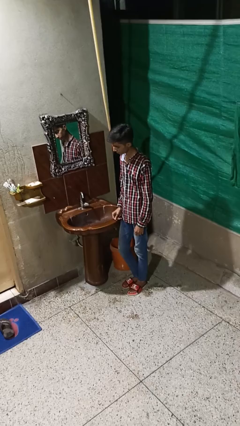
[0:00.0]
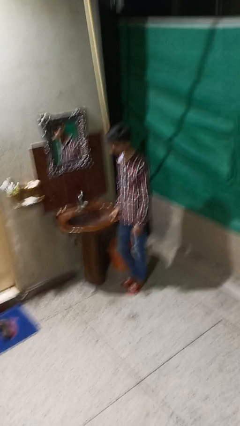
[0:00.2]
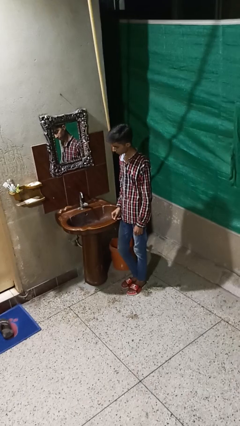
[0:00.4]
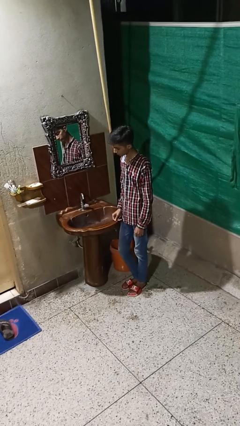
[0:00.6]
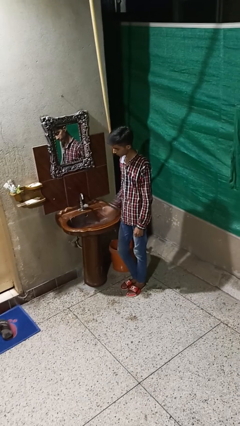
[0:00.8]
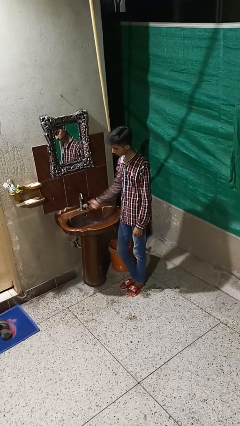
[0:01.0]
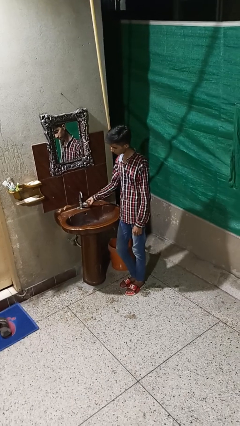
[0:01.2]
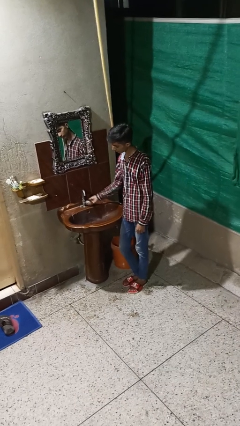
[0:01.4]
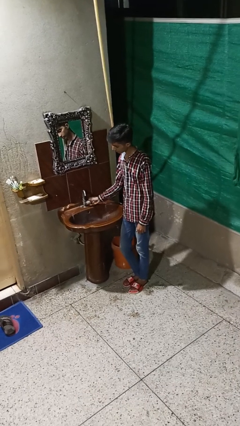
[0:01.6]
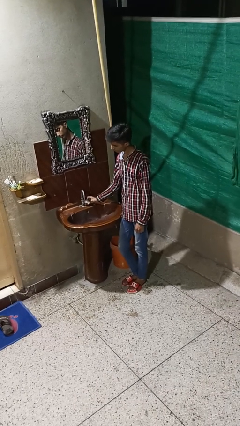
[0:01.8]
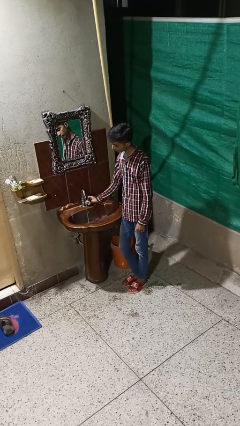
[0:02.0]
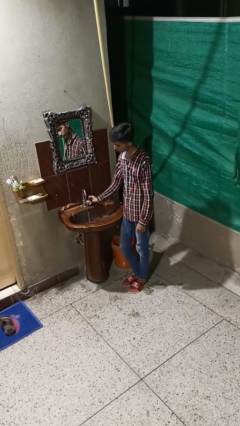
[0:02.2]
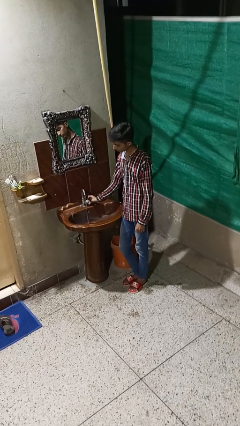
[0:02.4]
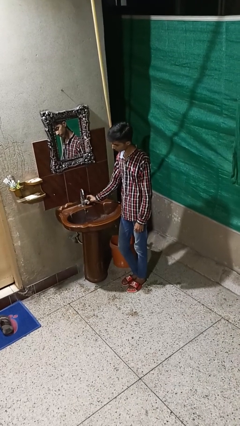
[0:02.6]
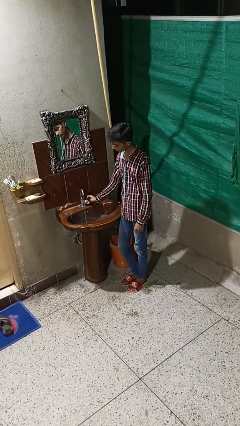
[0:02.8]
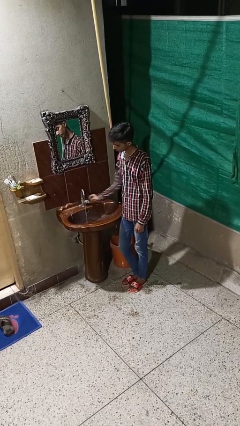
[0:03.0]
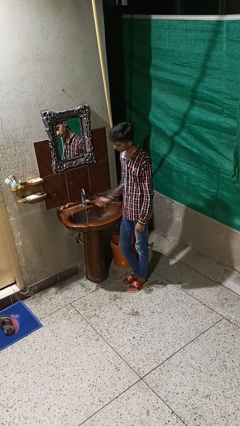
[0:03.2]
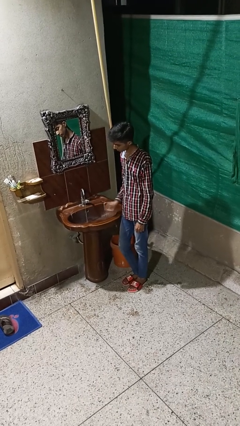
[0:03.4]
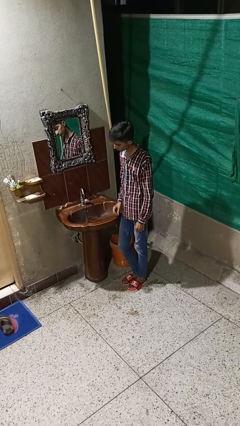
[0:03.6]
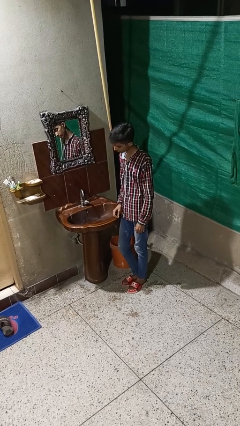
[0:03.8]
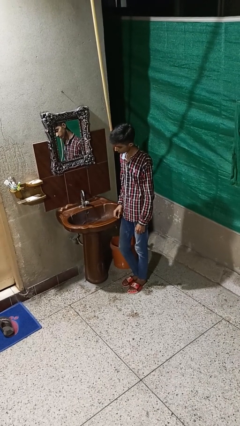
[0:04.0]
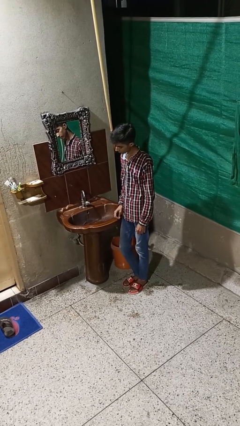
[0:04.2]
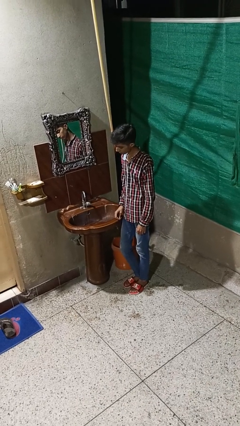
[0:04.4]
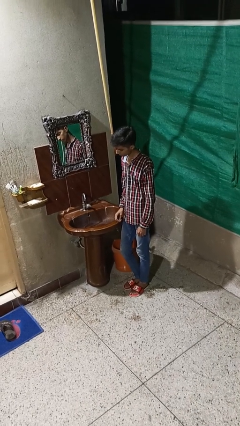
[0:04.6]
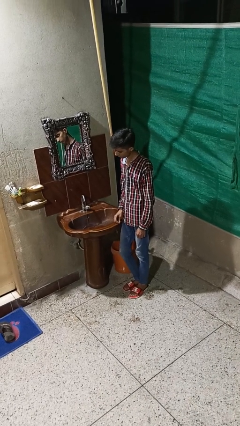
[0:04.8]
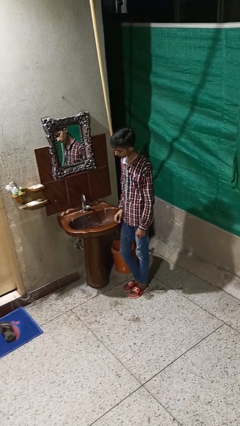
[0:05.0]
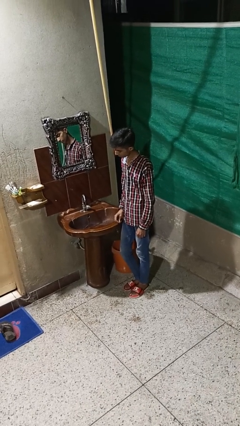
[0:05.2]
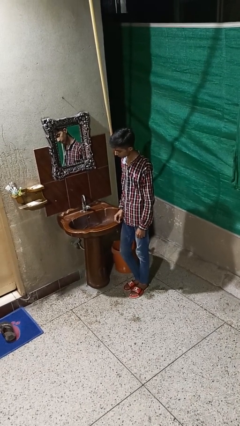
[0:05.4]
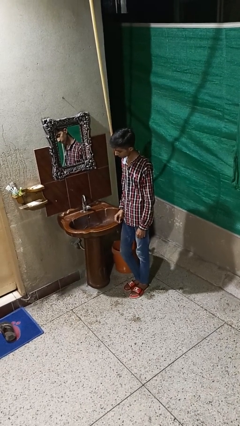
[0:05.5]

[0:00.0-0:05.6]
person turns on faucet

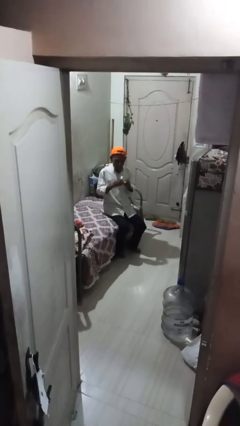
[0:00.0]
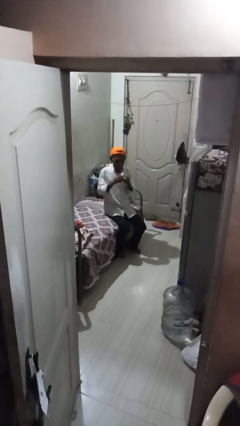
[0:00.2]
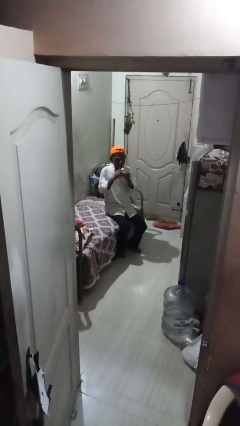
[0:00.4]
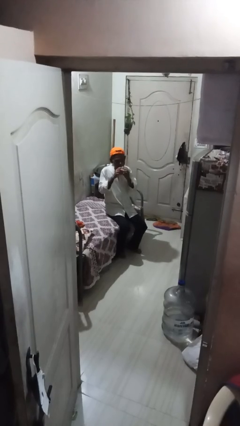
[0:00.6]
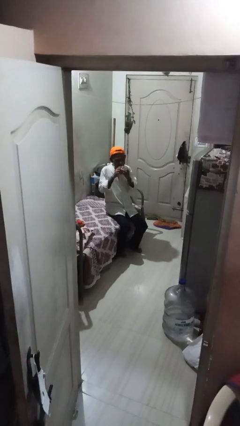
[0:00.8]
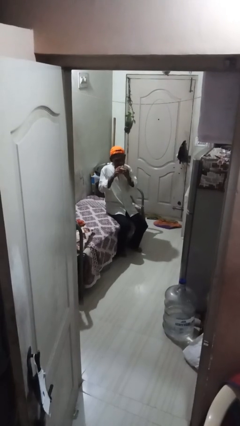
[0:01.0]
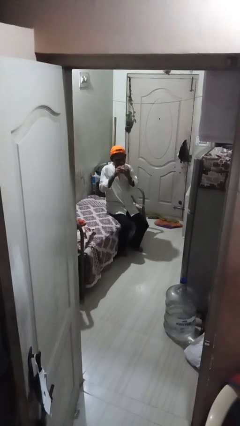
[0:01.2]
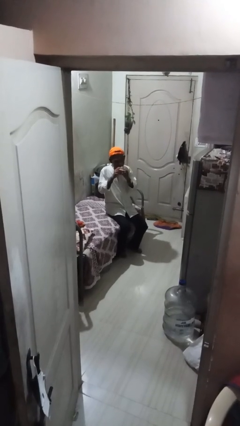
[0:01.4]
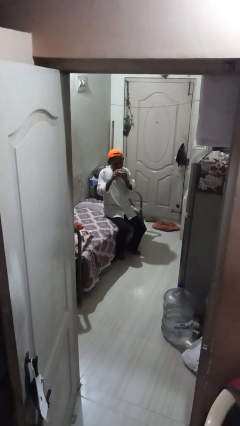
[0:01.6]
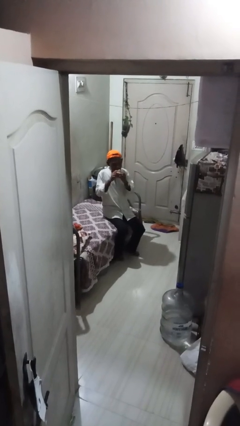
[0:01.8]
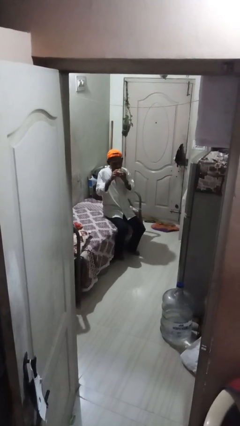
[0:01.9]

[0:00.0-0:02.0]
person eats banana

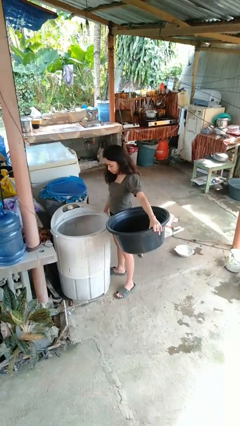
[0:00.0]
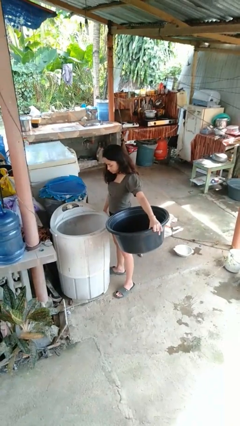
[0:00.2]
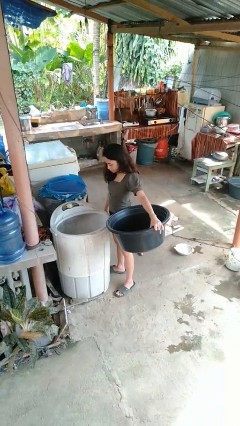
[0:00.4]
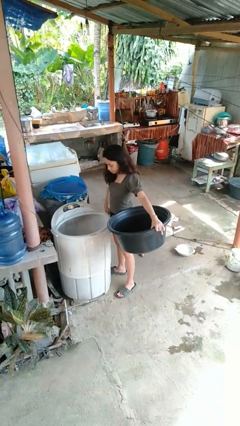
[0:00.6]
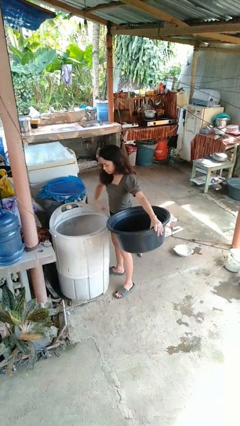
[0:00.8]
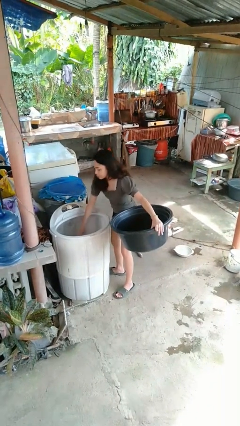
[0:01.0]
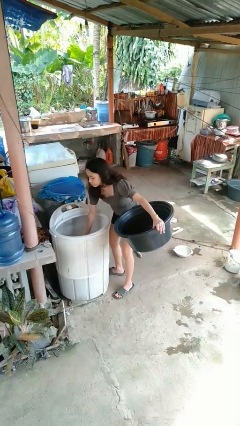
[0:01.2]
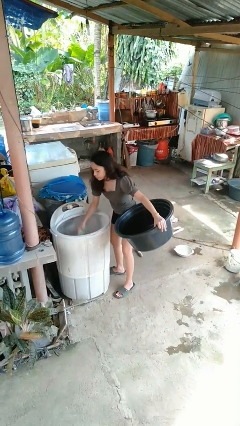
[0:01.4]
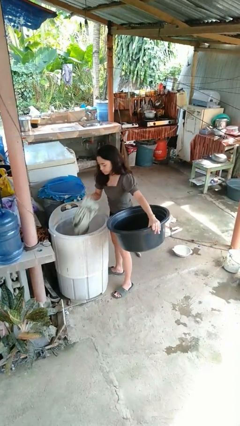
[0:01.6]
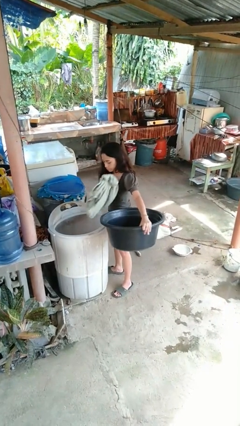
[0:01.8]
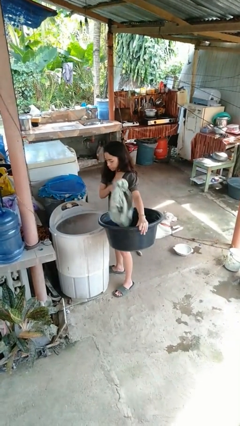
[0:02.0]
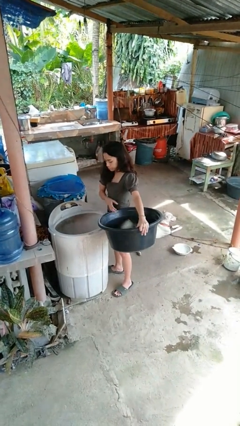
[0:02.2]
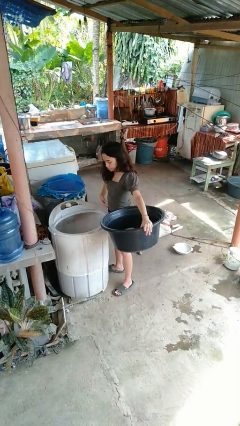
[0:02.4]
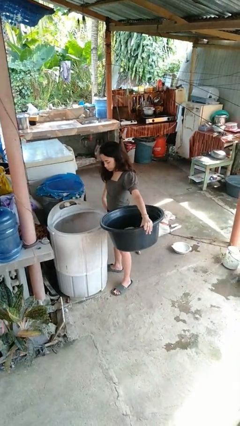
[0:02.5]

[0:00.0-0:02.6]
person unloads clotheswasher

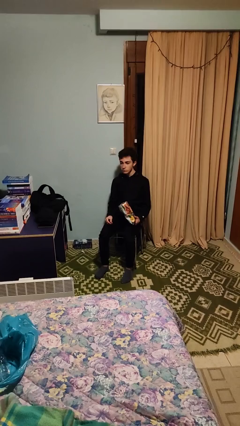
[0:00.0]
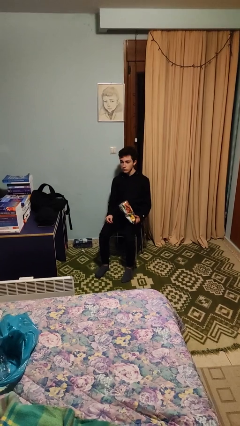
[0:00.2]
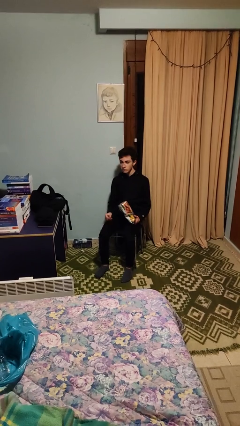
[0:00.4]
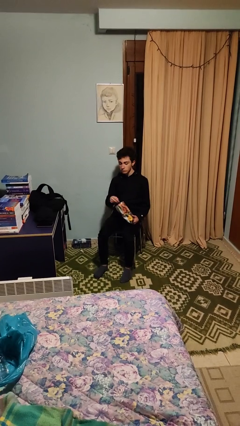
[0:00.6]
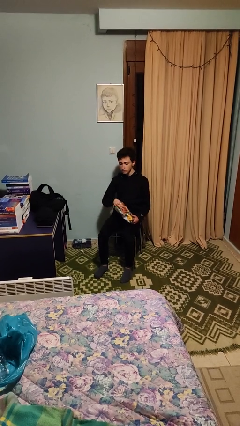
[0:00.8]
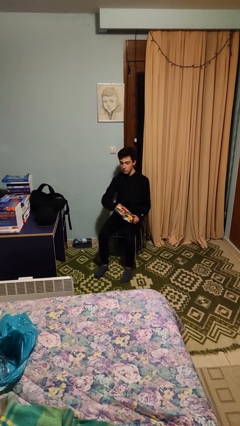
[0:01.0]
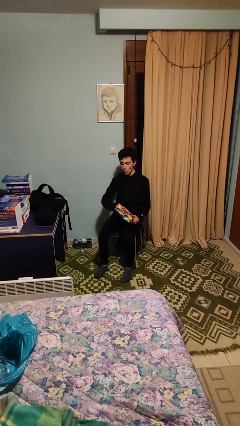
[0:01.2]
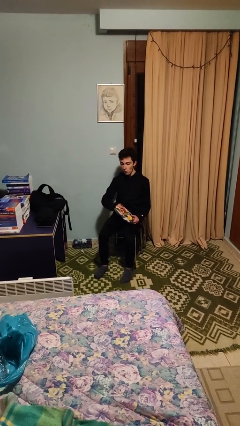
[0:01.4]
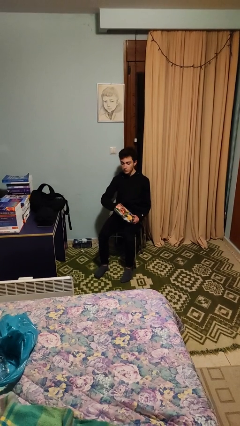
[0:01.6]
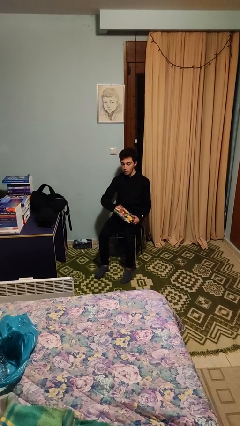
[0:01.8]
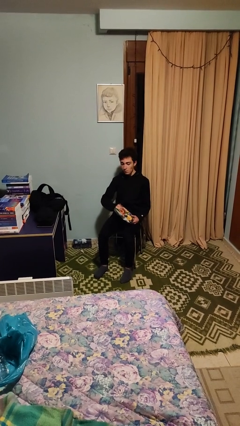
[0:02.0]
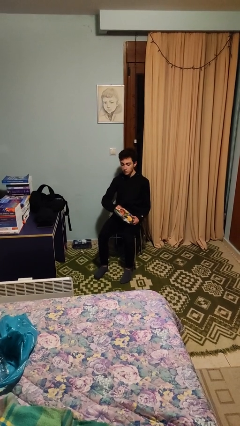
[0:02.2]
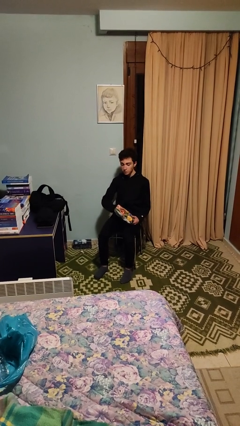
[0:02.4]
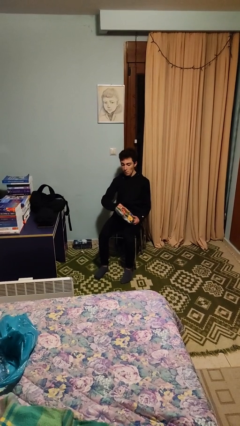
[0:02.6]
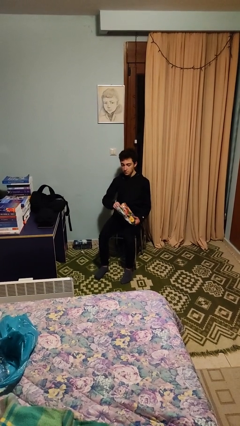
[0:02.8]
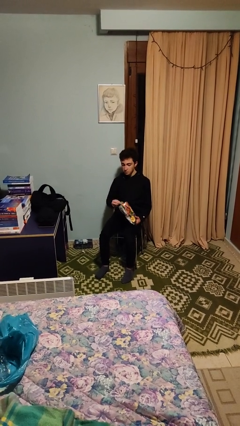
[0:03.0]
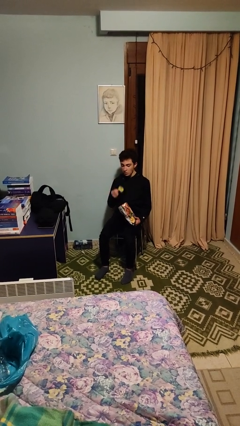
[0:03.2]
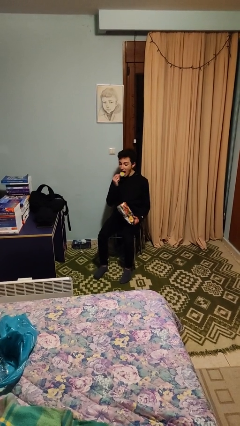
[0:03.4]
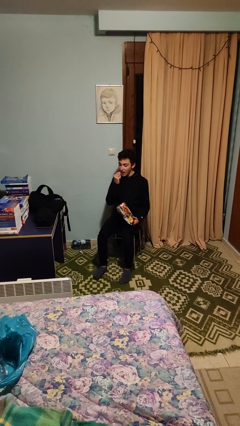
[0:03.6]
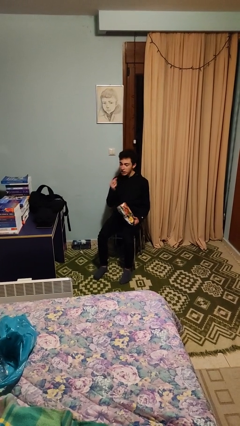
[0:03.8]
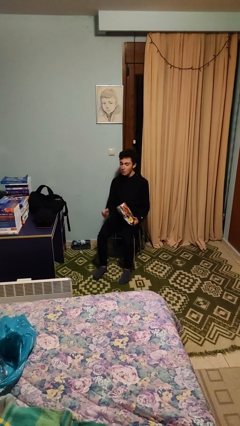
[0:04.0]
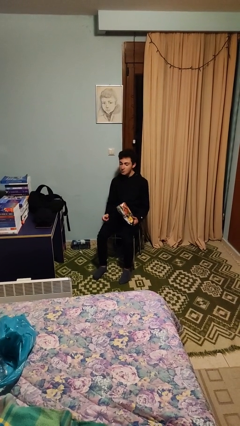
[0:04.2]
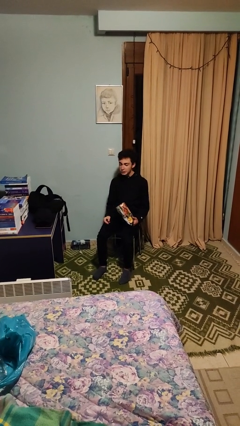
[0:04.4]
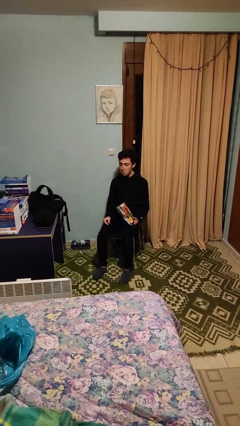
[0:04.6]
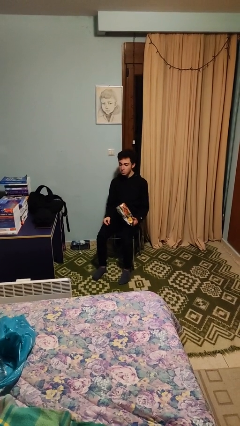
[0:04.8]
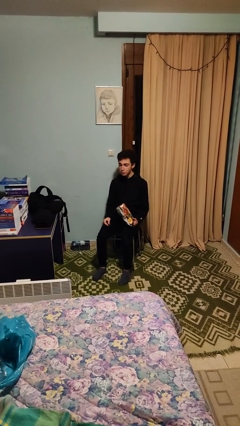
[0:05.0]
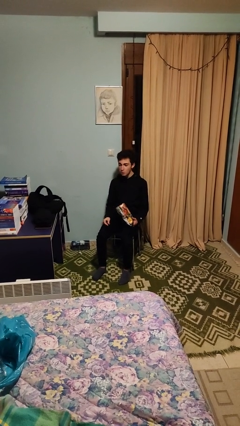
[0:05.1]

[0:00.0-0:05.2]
person eats snack from bag

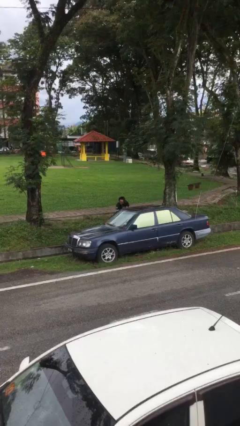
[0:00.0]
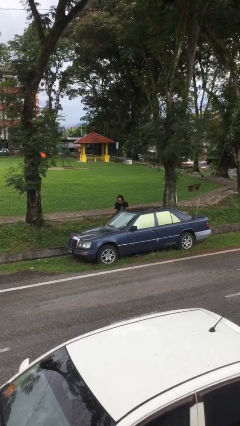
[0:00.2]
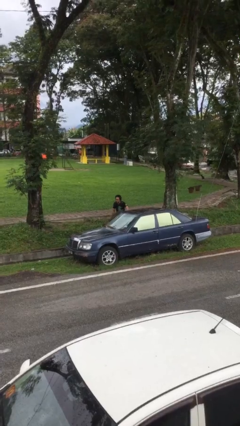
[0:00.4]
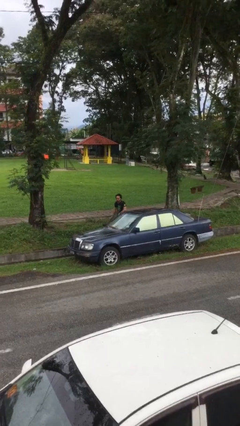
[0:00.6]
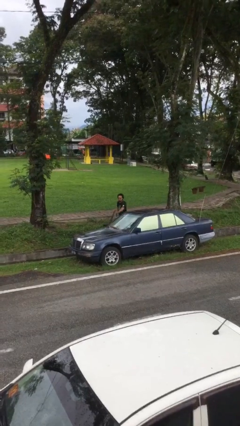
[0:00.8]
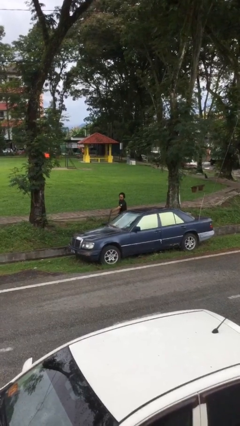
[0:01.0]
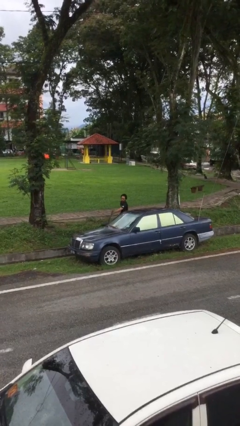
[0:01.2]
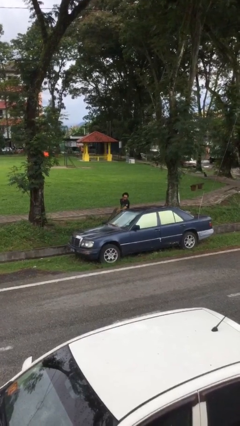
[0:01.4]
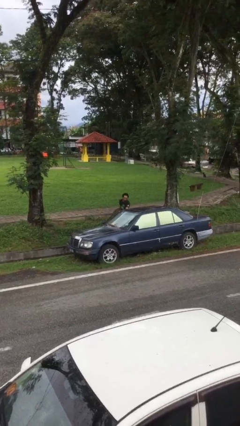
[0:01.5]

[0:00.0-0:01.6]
person opens car door

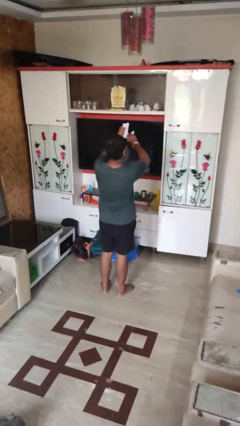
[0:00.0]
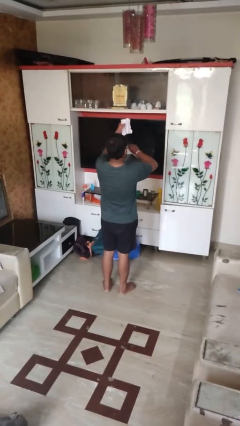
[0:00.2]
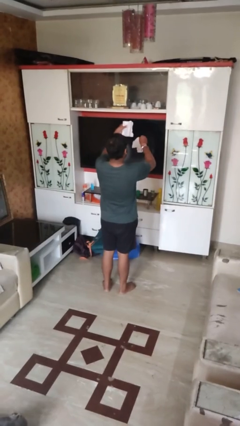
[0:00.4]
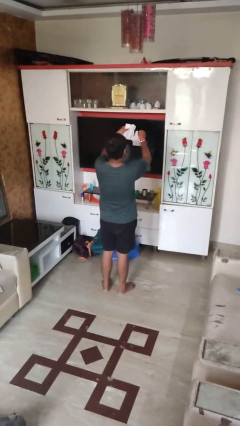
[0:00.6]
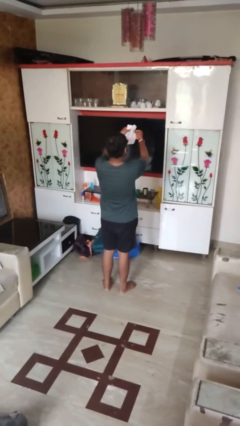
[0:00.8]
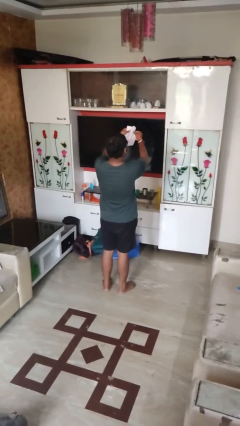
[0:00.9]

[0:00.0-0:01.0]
person tears paper
